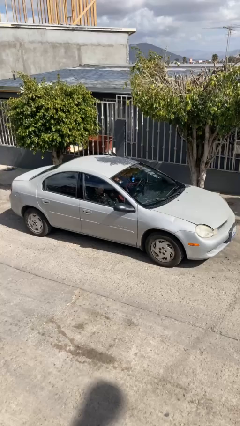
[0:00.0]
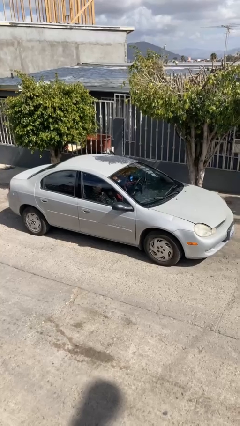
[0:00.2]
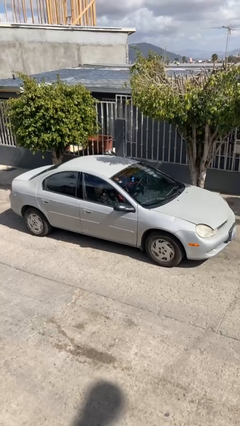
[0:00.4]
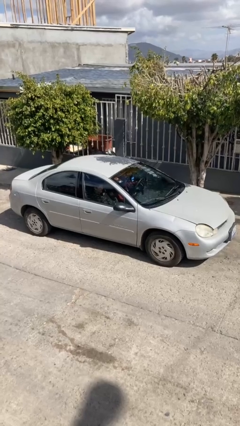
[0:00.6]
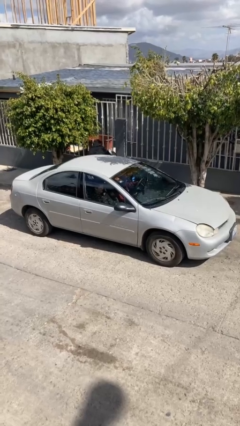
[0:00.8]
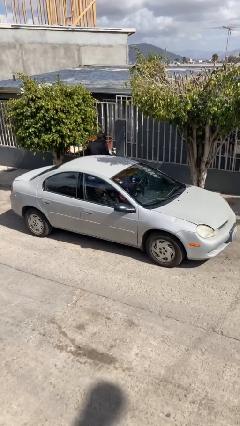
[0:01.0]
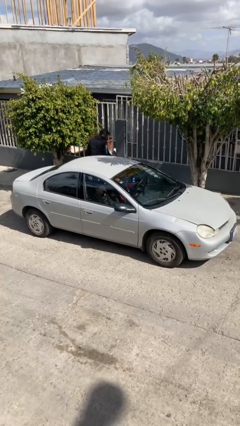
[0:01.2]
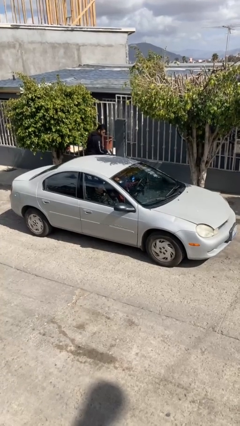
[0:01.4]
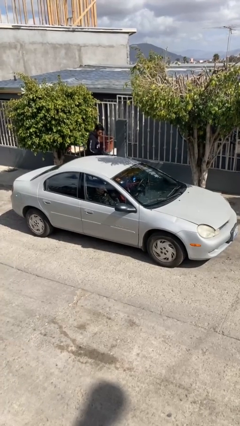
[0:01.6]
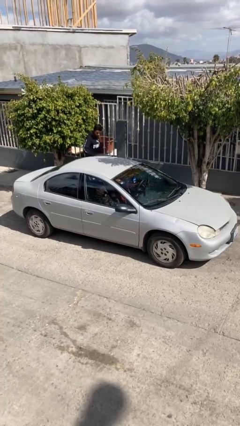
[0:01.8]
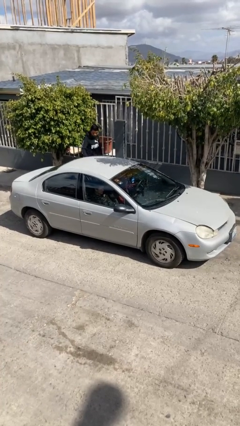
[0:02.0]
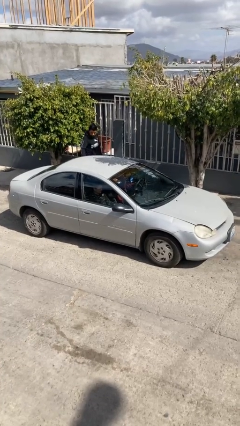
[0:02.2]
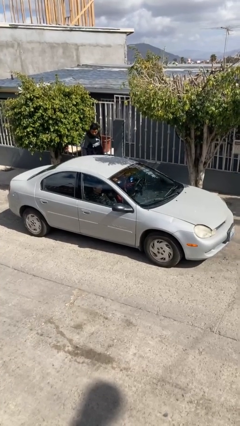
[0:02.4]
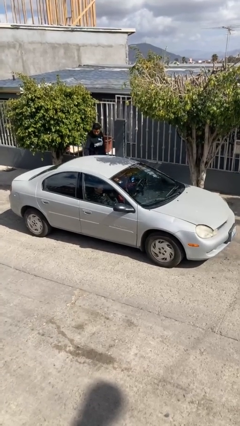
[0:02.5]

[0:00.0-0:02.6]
car drops off person

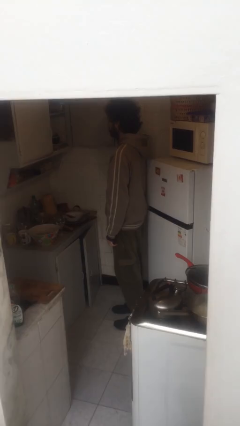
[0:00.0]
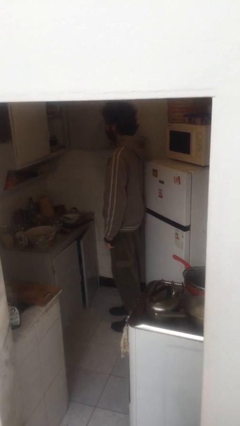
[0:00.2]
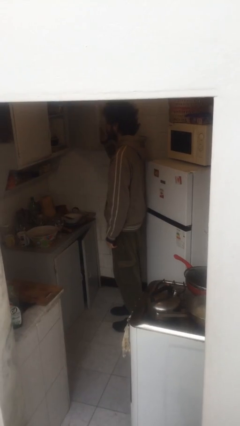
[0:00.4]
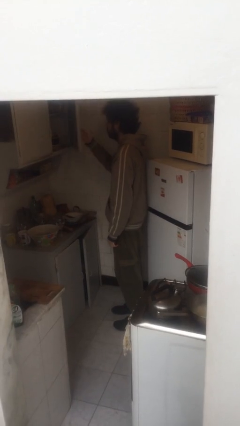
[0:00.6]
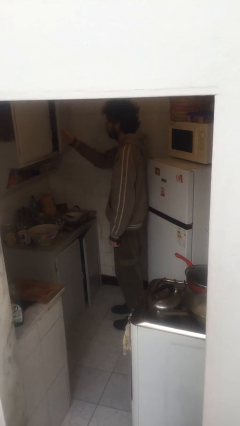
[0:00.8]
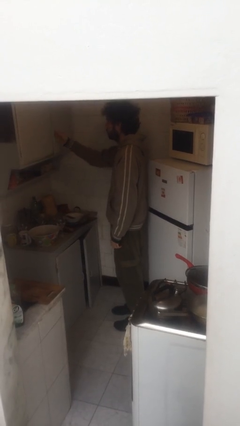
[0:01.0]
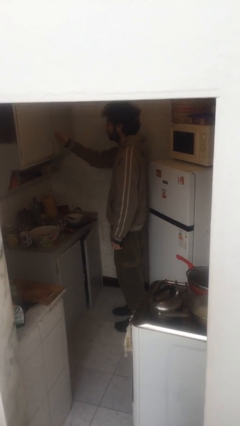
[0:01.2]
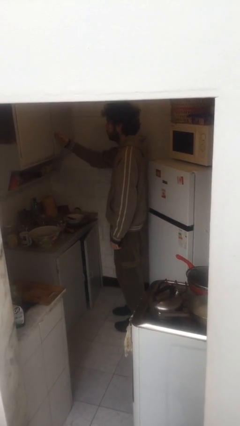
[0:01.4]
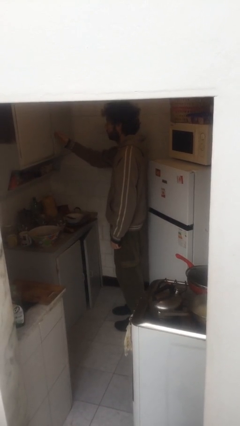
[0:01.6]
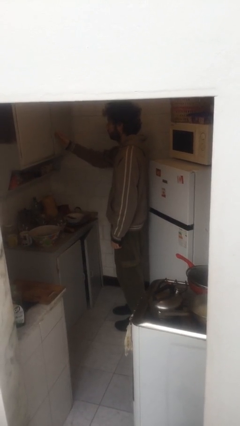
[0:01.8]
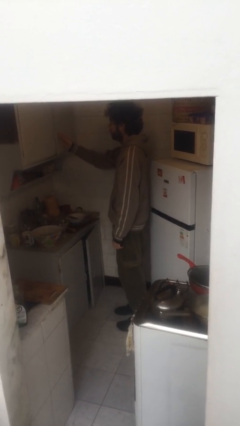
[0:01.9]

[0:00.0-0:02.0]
person closes cabinet

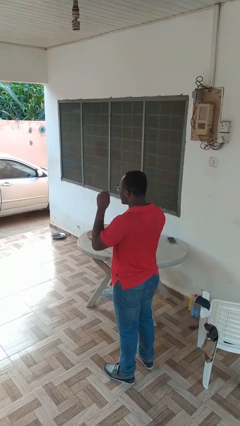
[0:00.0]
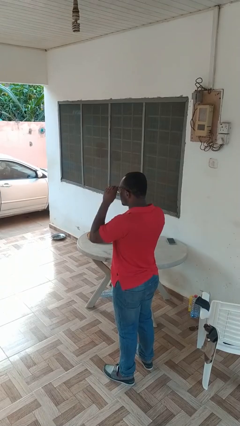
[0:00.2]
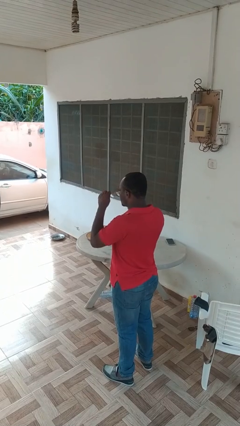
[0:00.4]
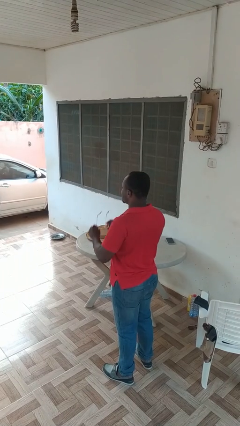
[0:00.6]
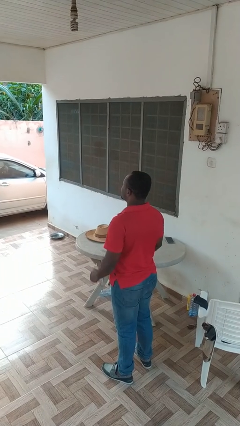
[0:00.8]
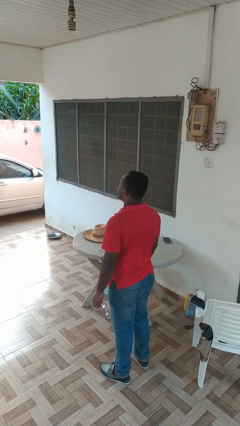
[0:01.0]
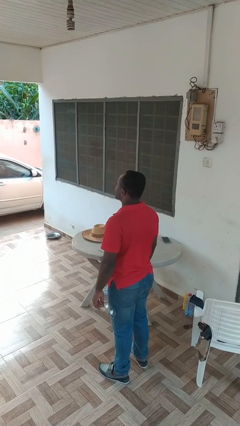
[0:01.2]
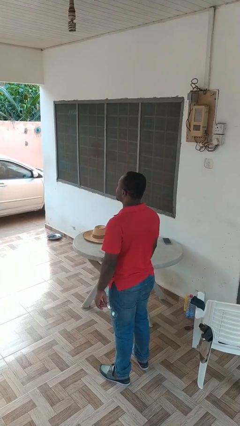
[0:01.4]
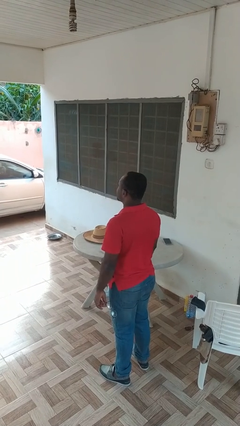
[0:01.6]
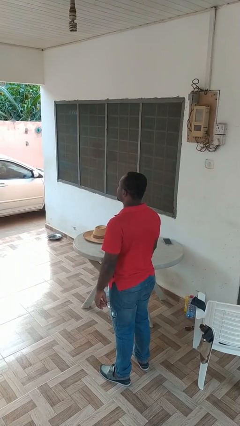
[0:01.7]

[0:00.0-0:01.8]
person takes off glasses

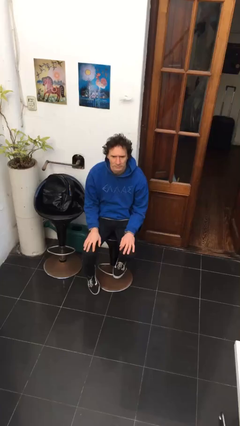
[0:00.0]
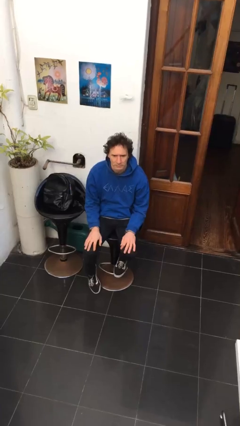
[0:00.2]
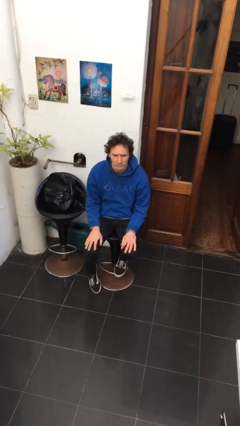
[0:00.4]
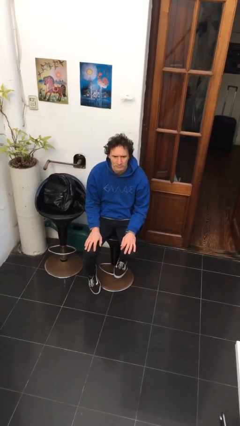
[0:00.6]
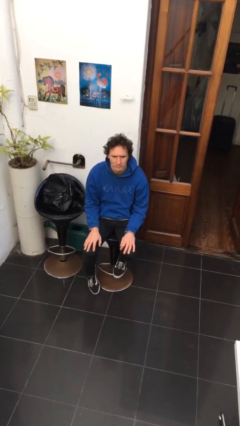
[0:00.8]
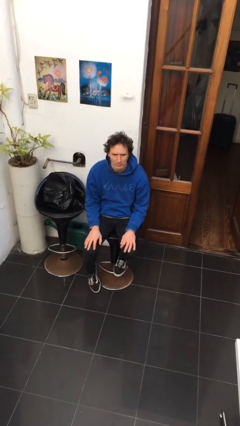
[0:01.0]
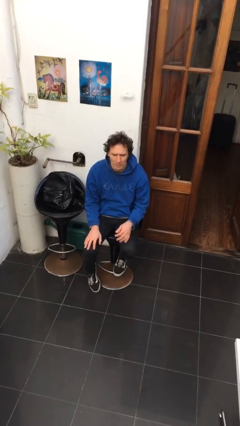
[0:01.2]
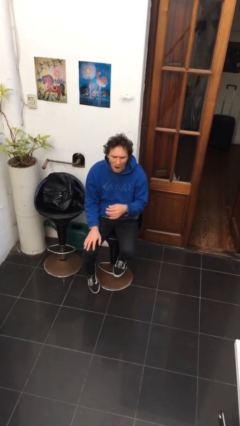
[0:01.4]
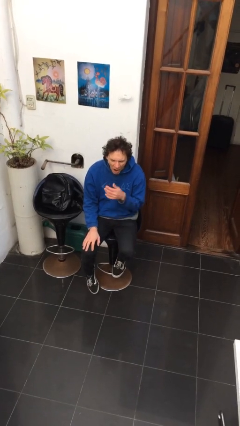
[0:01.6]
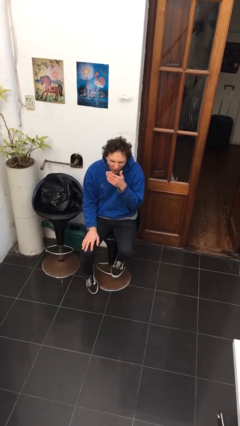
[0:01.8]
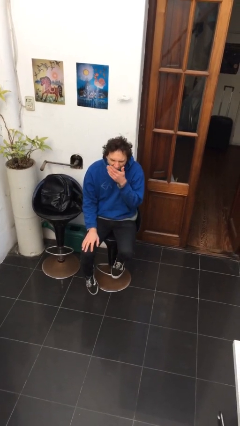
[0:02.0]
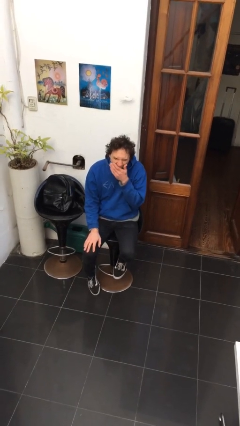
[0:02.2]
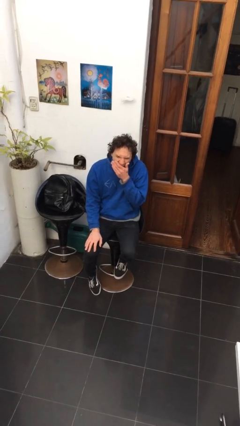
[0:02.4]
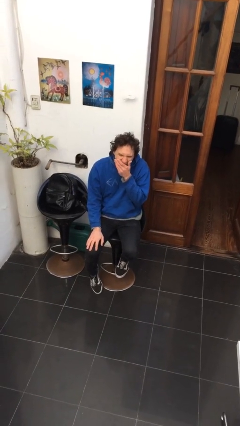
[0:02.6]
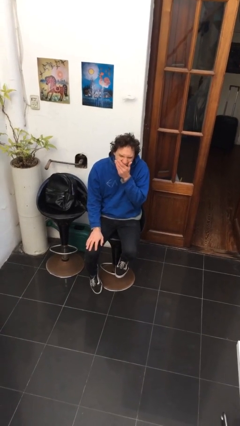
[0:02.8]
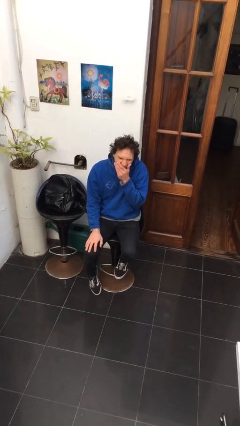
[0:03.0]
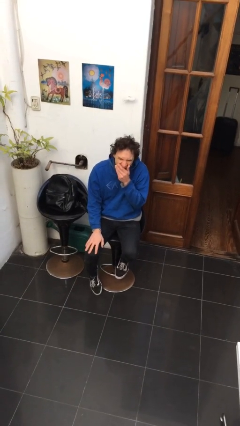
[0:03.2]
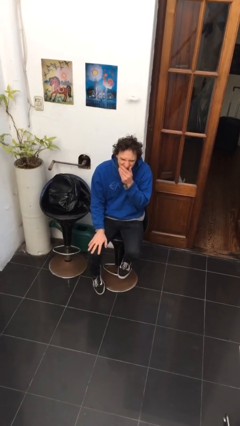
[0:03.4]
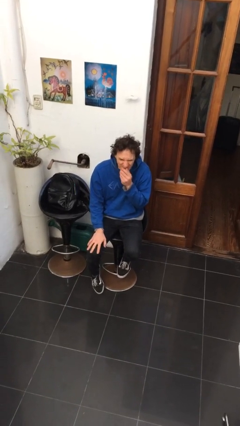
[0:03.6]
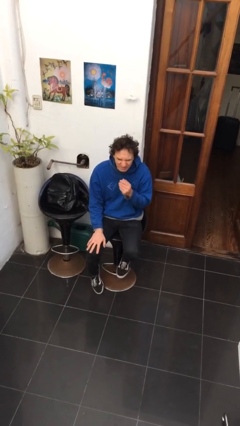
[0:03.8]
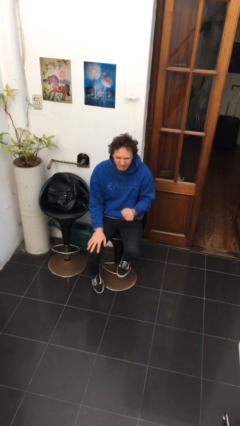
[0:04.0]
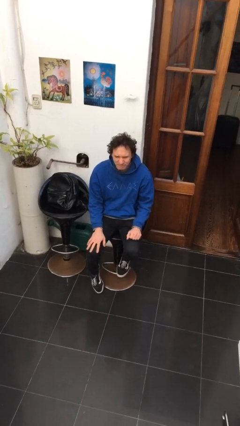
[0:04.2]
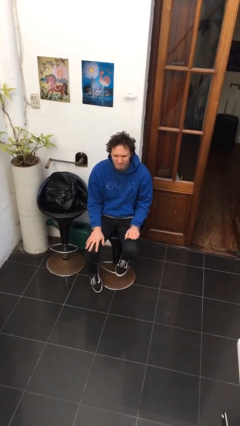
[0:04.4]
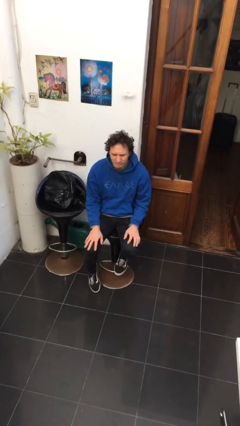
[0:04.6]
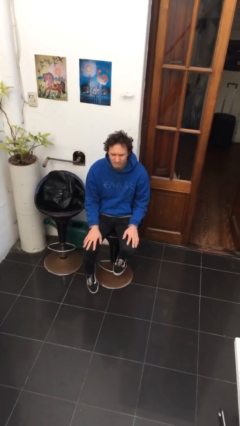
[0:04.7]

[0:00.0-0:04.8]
person yawns

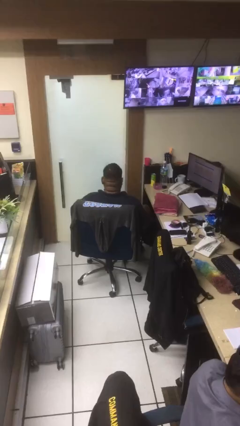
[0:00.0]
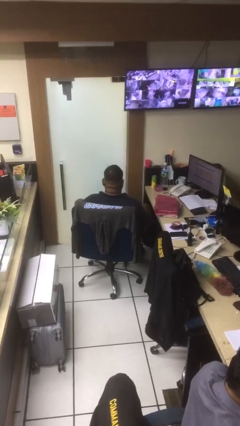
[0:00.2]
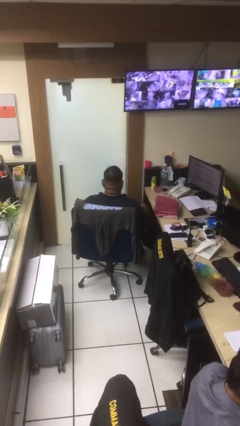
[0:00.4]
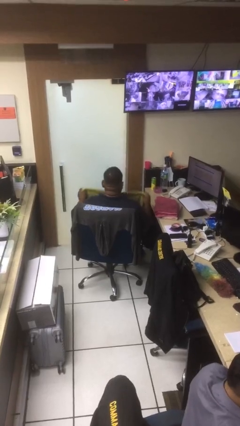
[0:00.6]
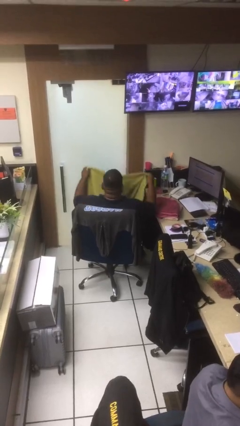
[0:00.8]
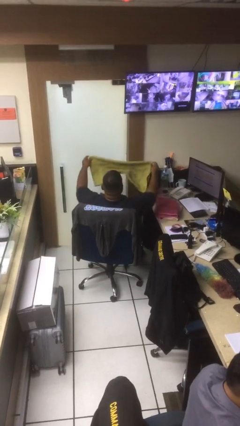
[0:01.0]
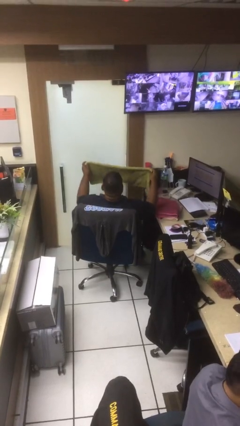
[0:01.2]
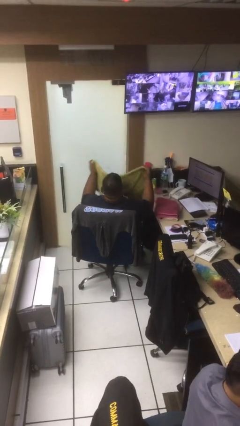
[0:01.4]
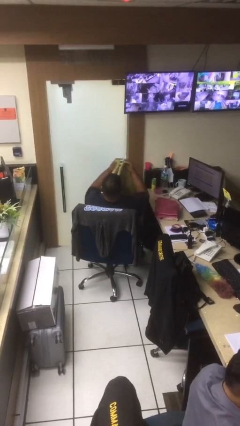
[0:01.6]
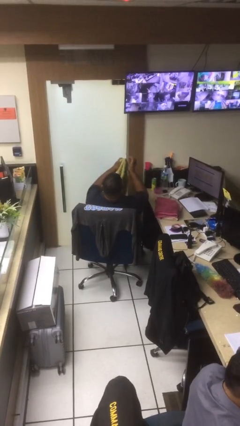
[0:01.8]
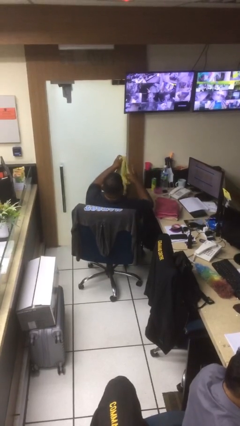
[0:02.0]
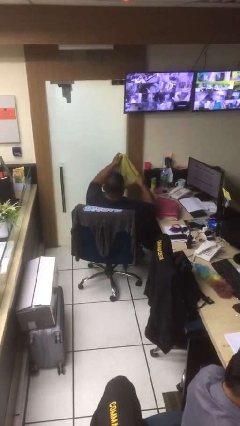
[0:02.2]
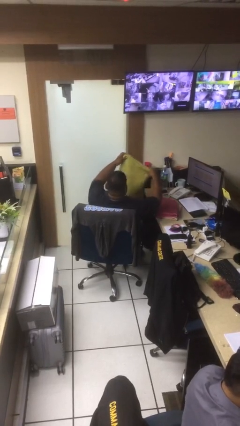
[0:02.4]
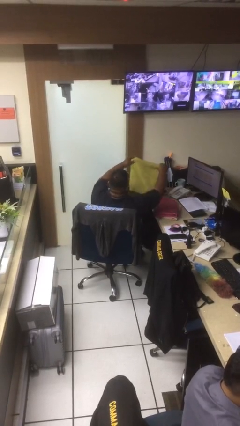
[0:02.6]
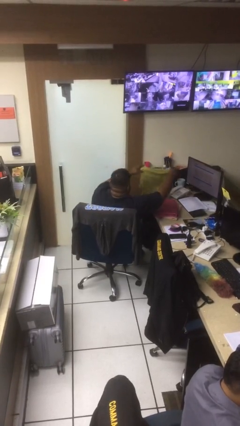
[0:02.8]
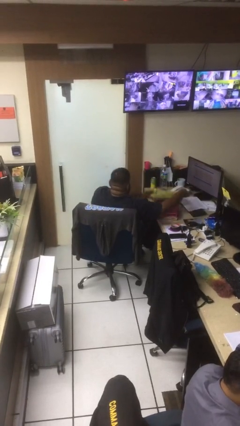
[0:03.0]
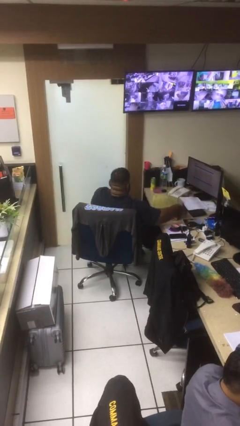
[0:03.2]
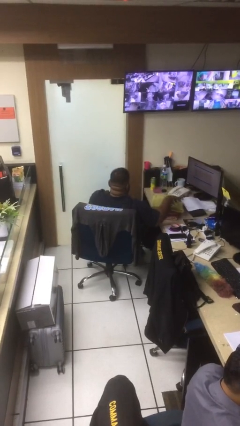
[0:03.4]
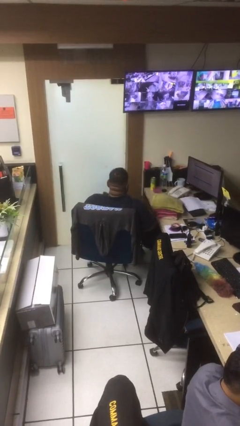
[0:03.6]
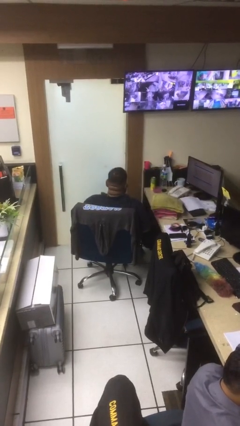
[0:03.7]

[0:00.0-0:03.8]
person folds towel

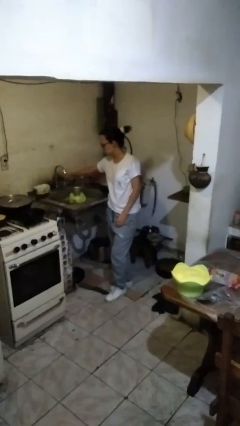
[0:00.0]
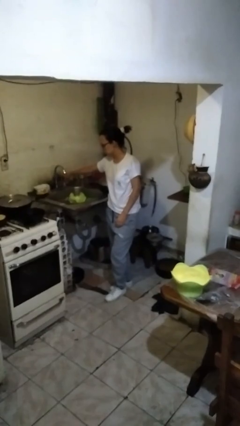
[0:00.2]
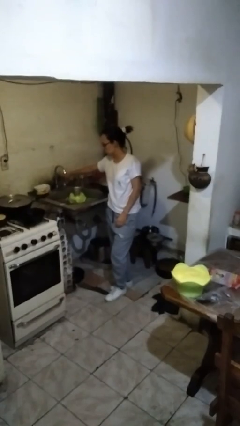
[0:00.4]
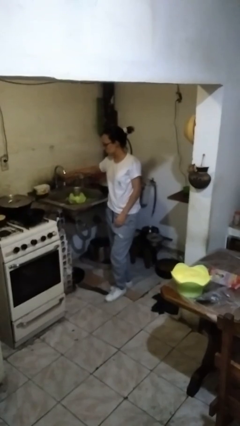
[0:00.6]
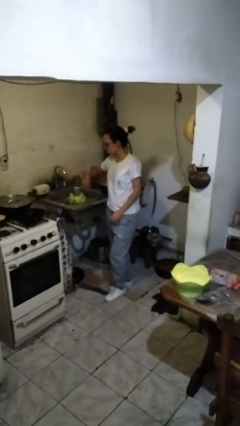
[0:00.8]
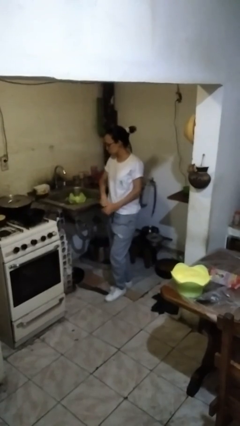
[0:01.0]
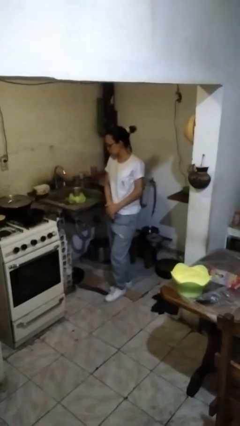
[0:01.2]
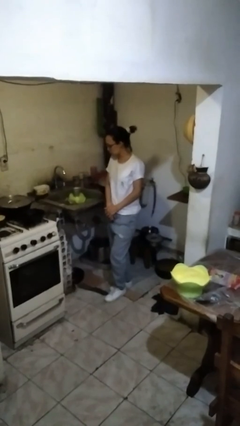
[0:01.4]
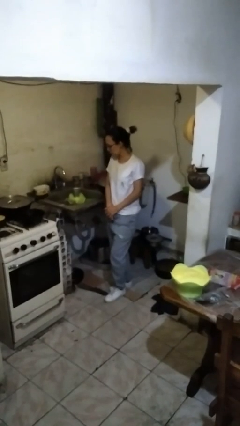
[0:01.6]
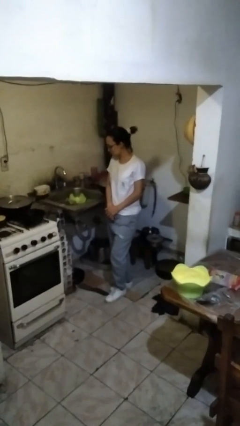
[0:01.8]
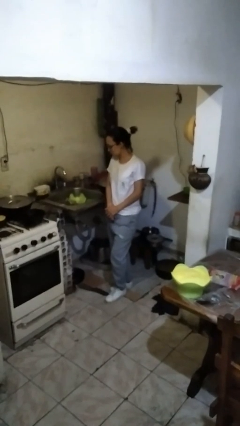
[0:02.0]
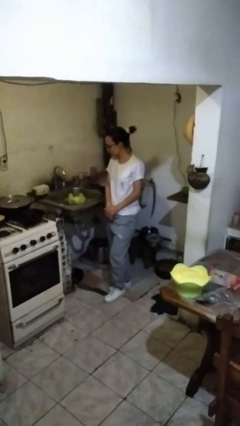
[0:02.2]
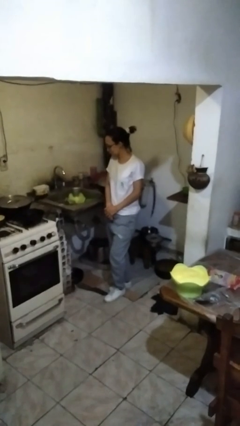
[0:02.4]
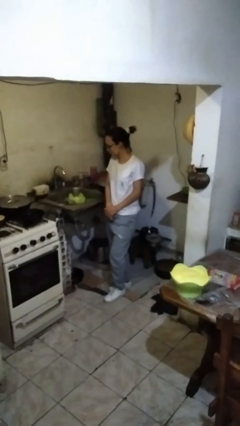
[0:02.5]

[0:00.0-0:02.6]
person turns off faucet
